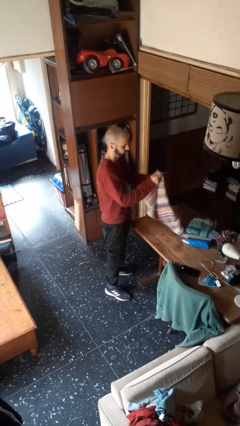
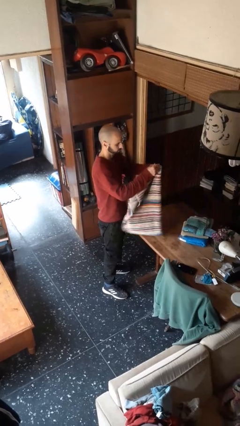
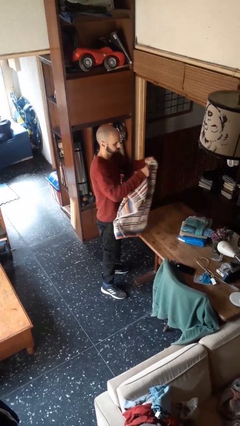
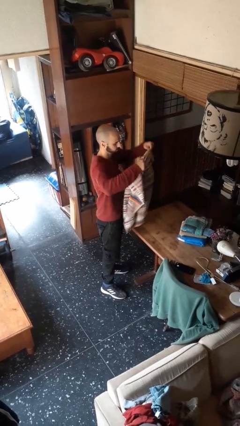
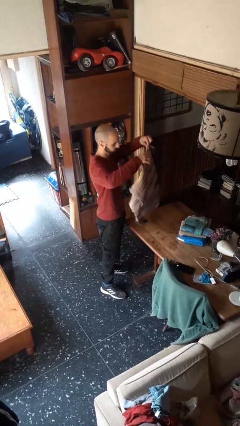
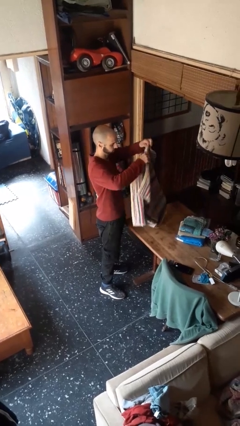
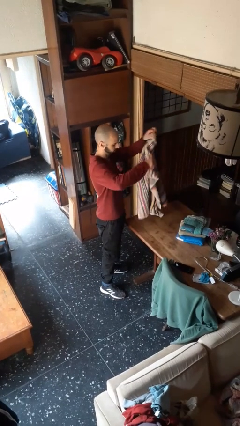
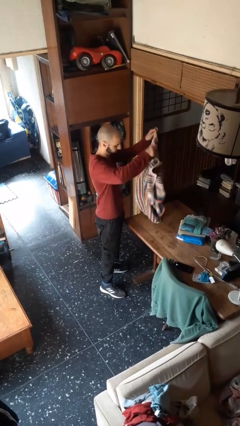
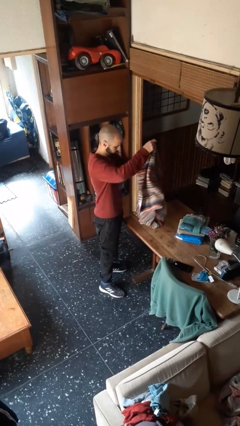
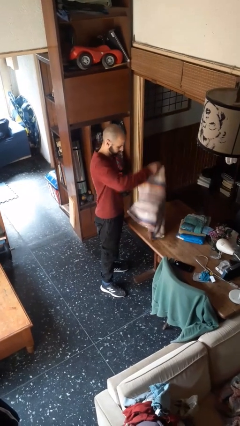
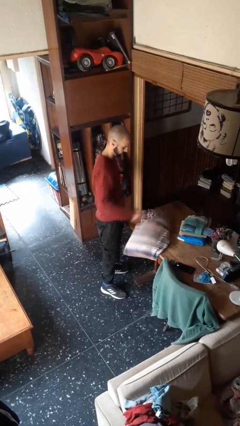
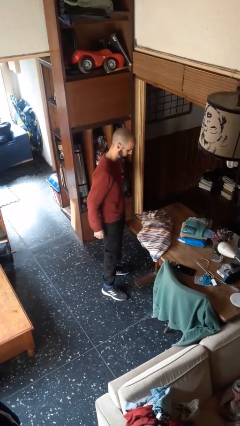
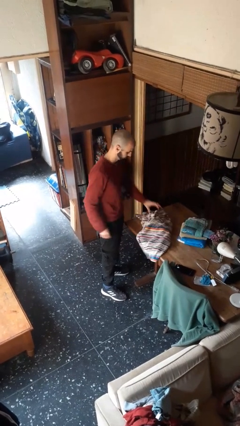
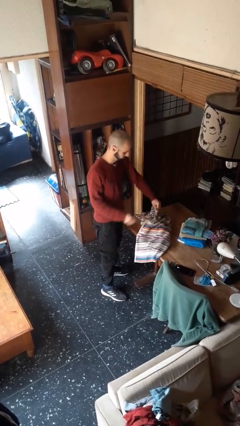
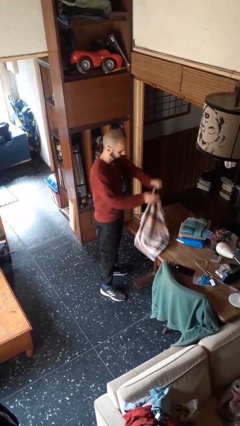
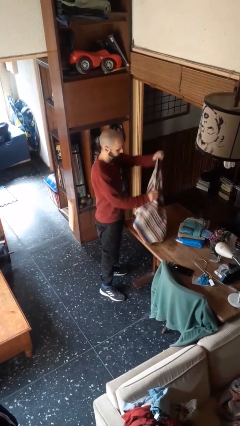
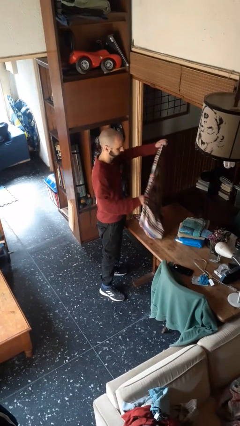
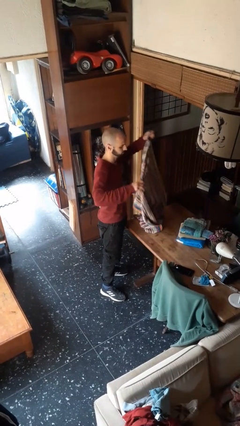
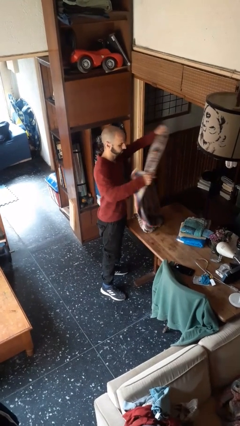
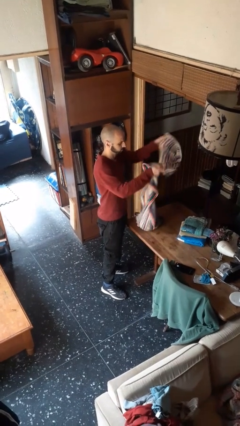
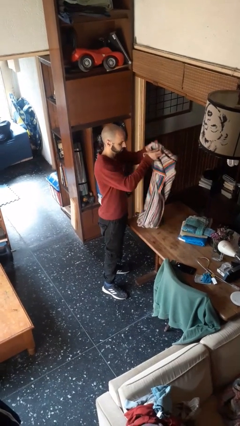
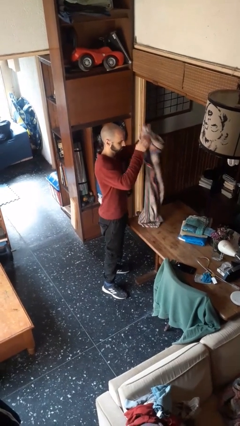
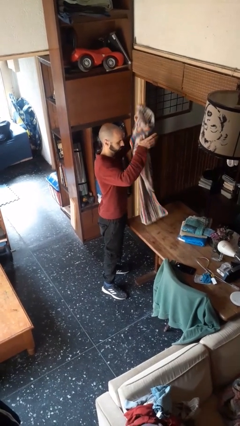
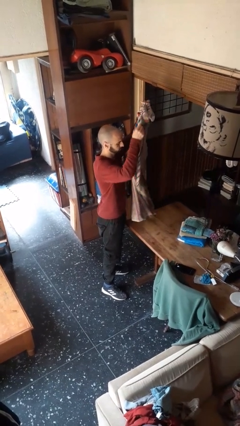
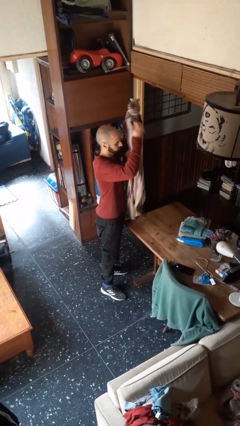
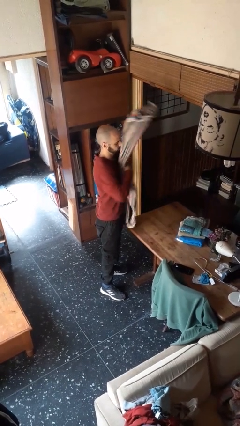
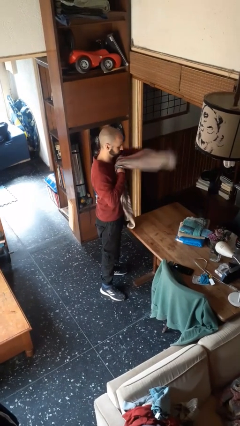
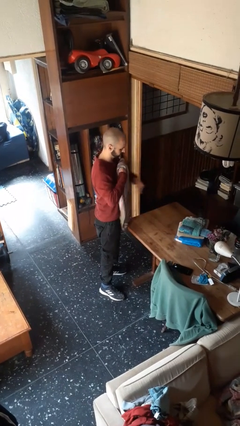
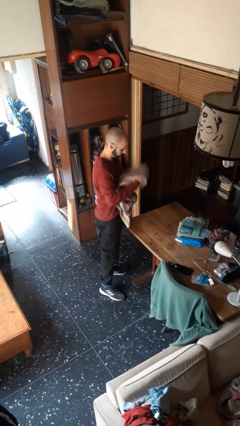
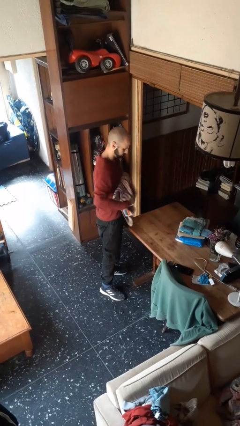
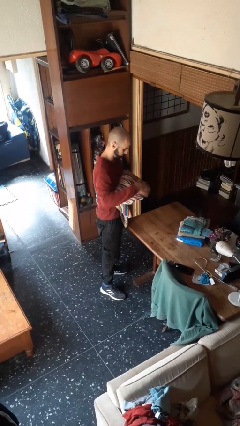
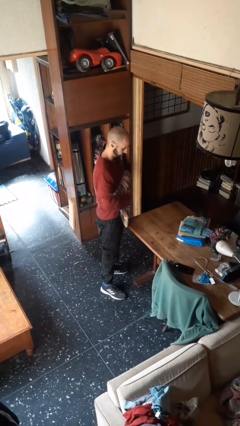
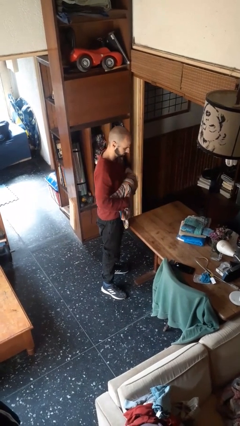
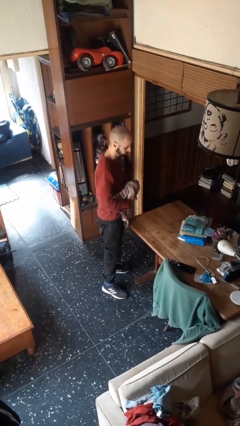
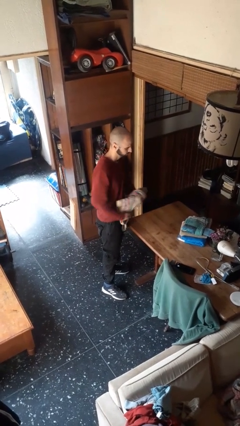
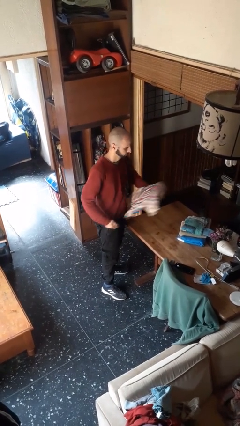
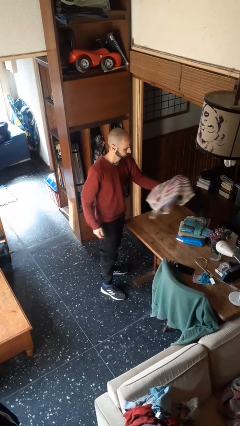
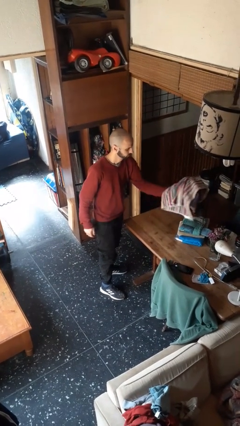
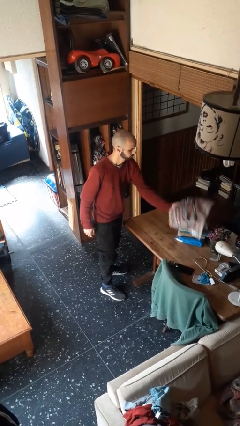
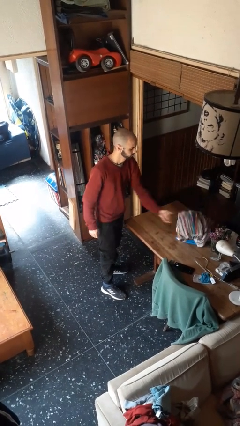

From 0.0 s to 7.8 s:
person folds towel

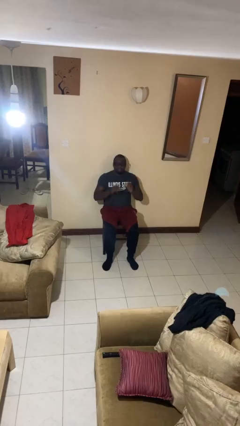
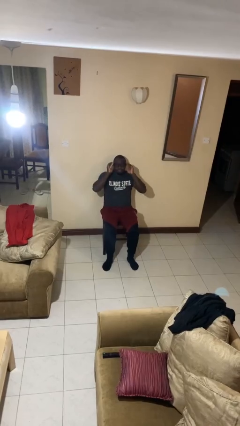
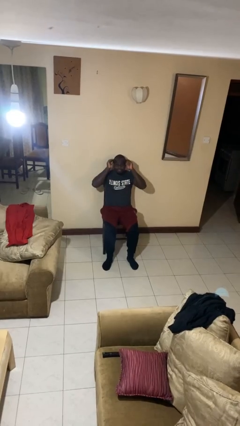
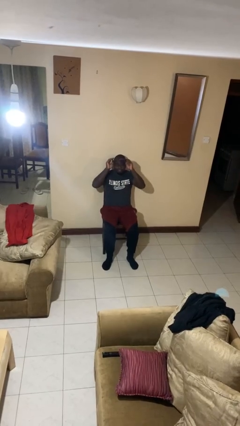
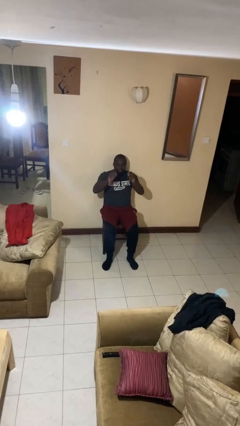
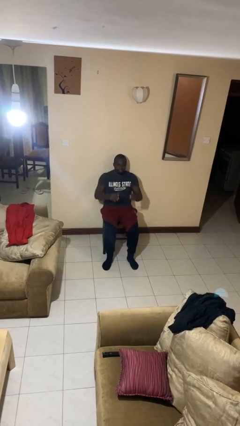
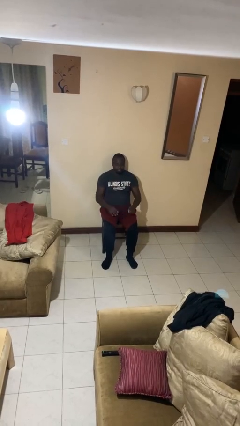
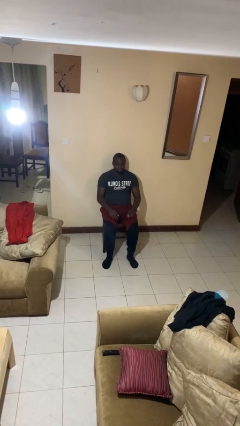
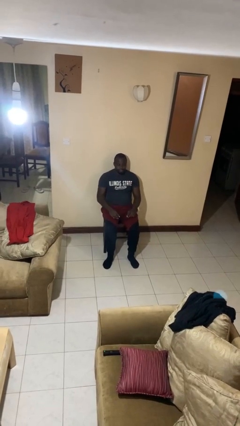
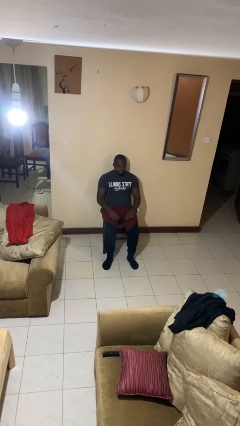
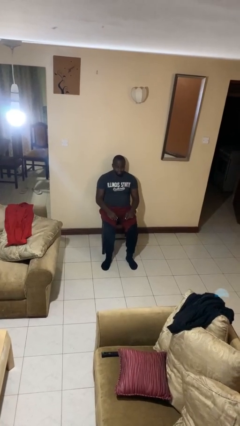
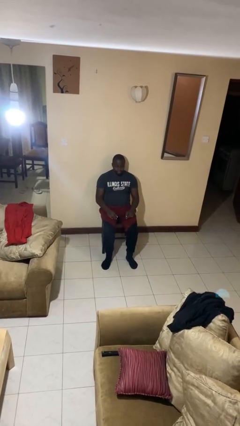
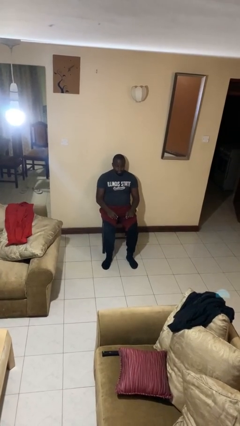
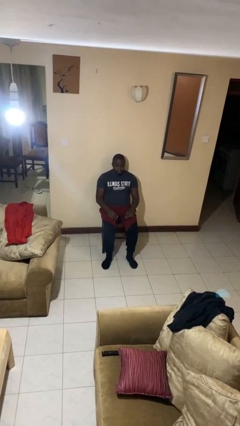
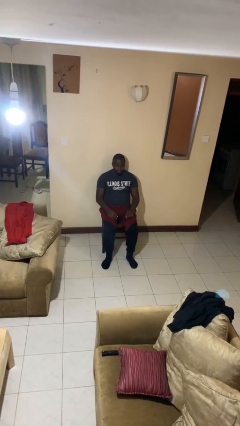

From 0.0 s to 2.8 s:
person takes off glasses

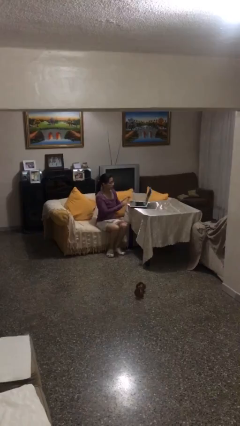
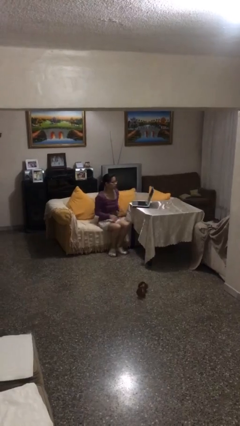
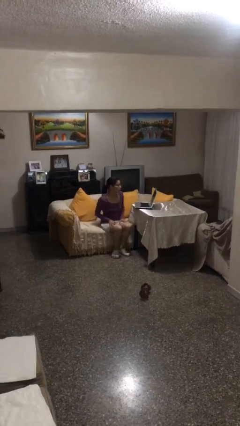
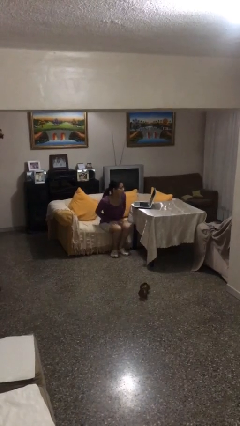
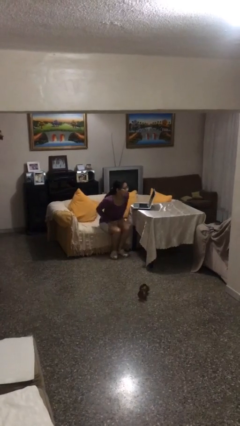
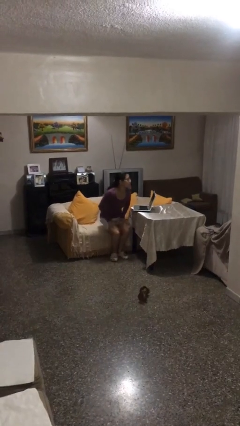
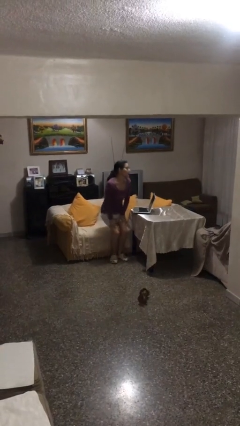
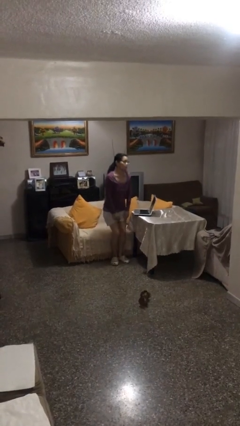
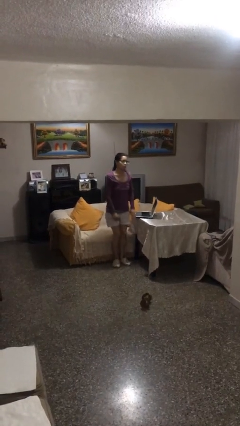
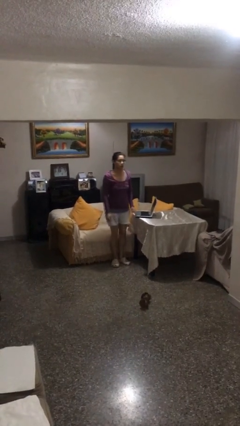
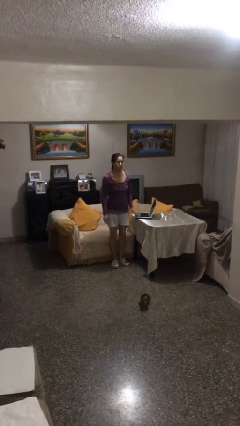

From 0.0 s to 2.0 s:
person stands up

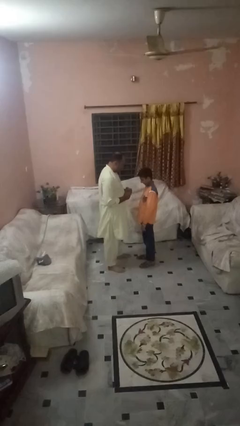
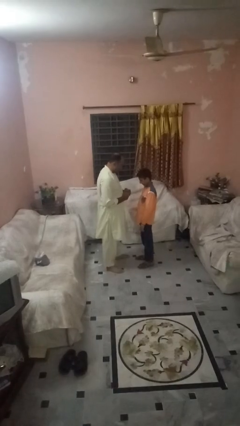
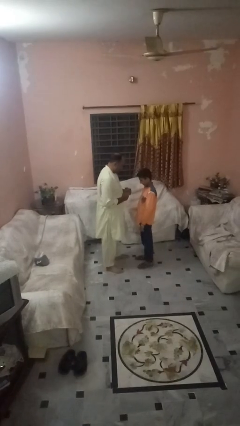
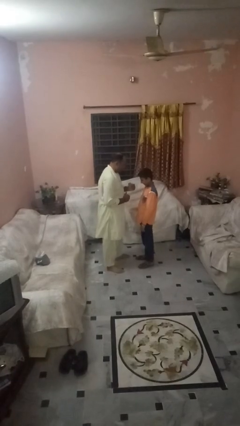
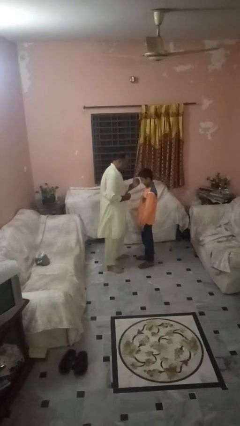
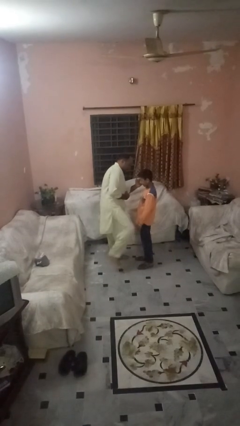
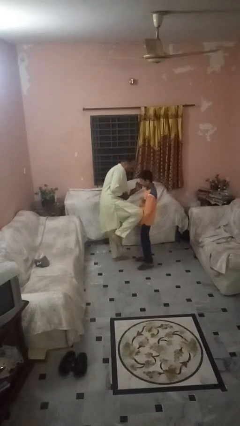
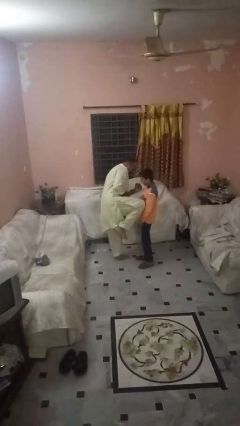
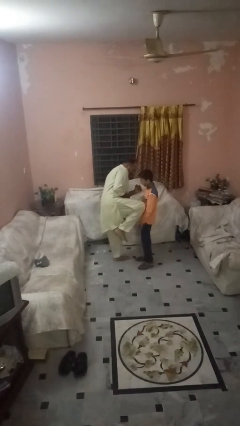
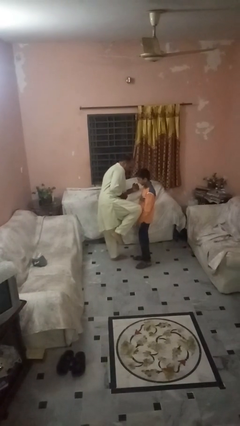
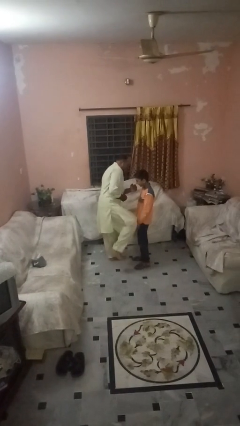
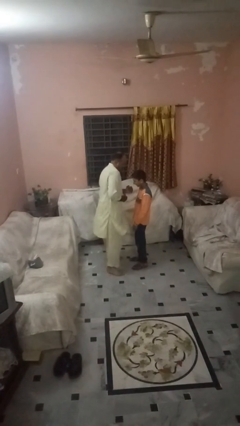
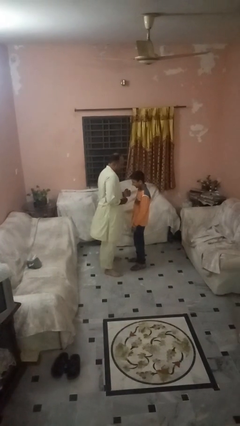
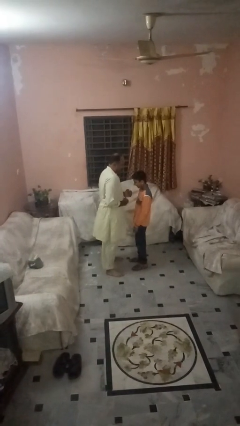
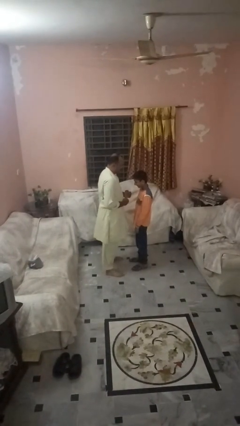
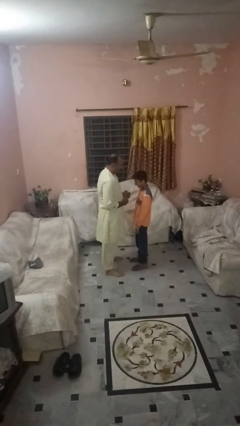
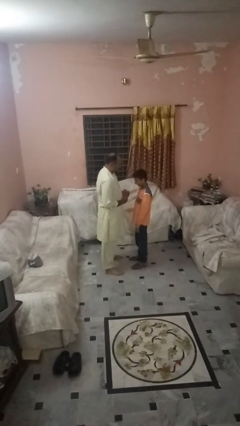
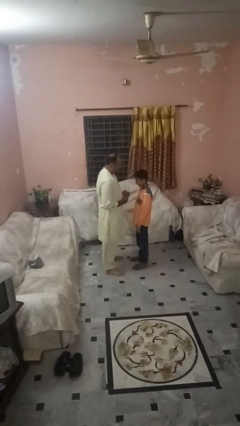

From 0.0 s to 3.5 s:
person kicks object to person

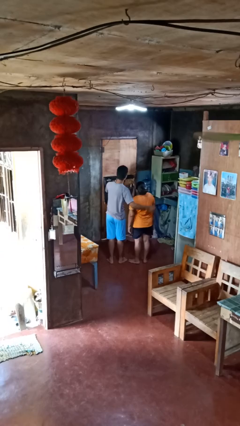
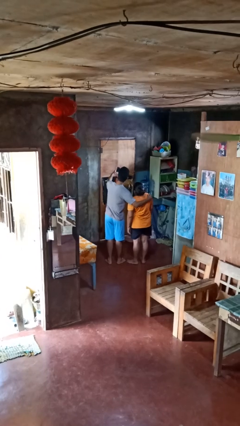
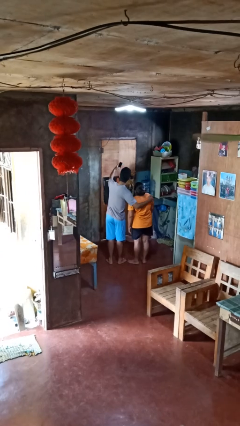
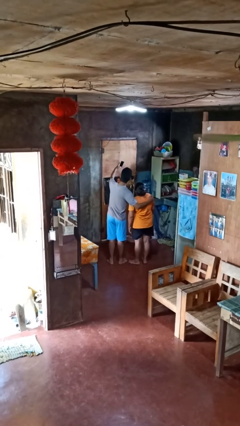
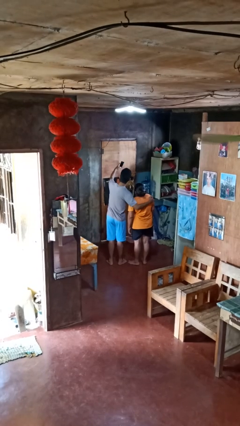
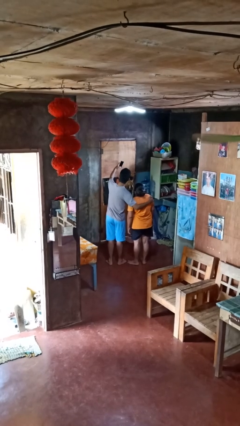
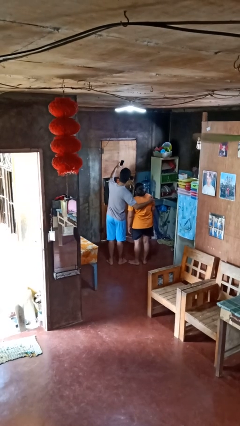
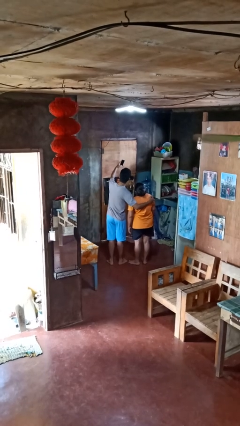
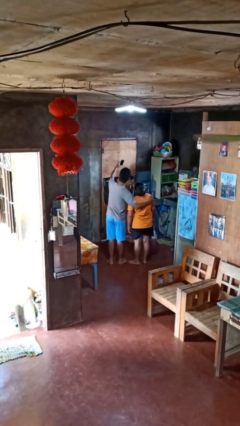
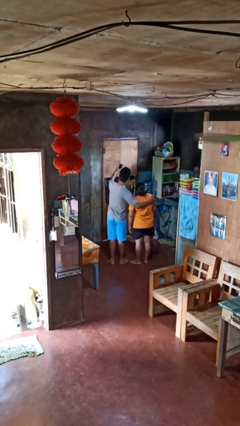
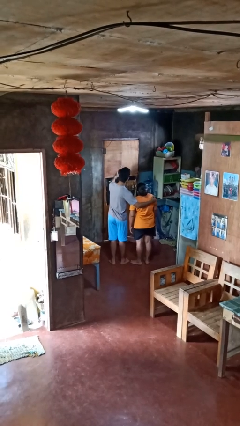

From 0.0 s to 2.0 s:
person takes selfie with person
